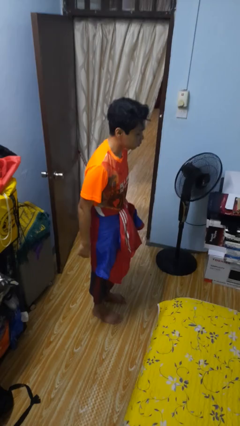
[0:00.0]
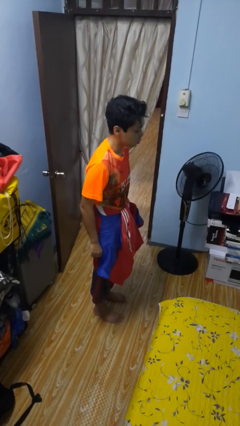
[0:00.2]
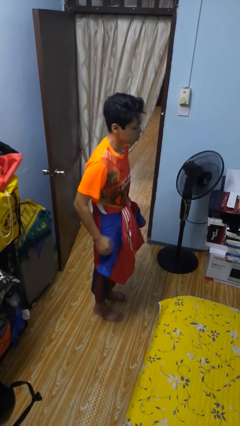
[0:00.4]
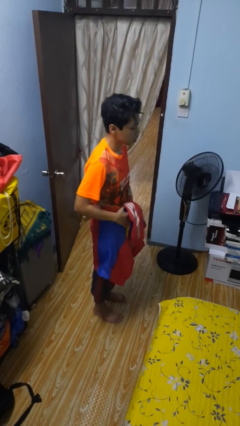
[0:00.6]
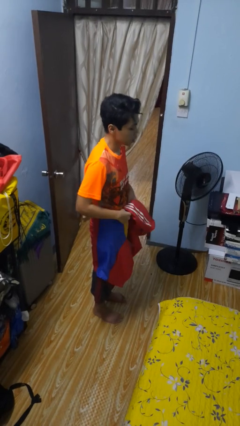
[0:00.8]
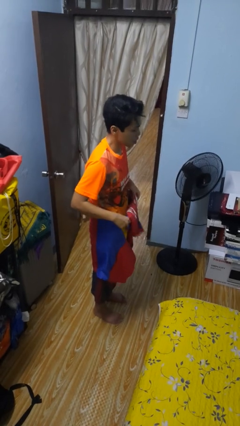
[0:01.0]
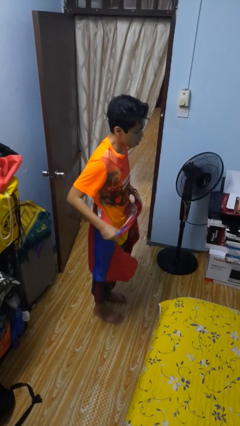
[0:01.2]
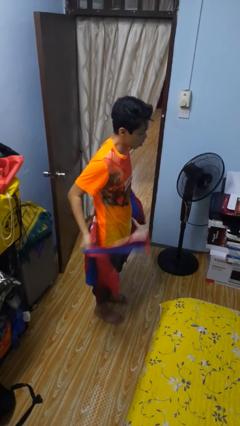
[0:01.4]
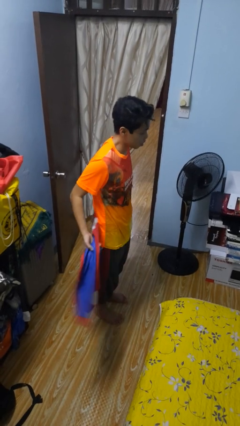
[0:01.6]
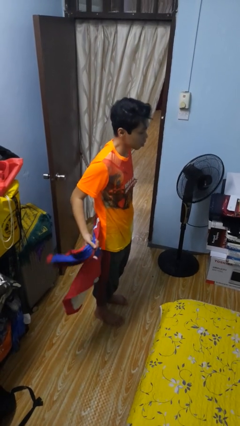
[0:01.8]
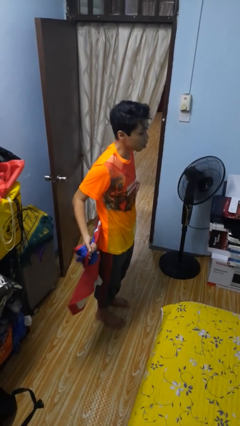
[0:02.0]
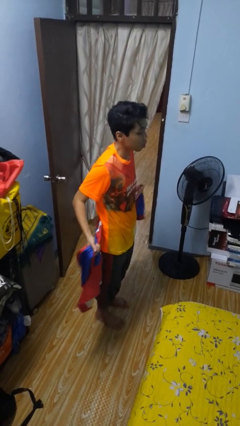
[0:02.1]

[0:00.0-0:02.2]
person unties jacket around waist

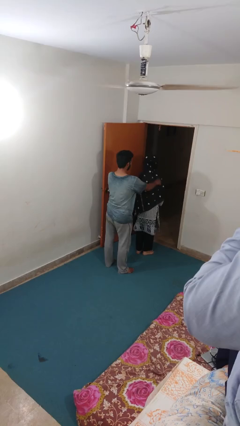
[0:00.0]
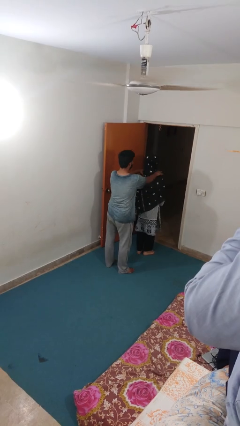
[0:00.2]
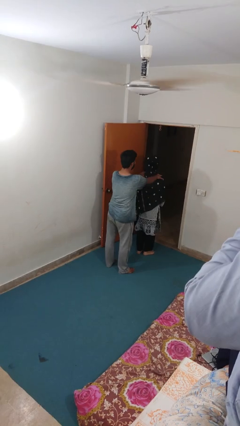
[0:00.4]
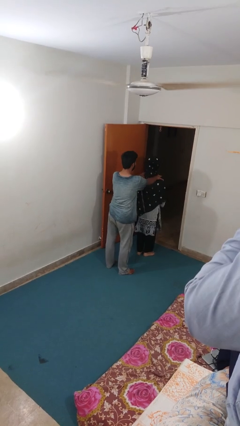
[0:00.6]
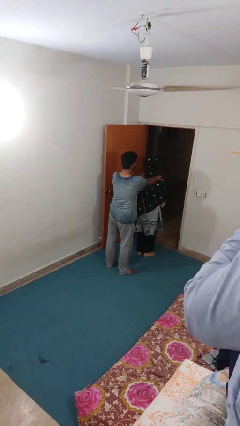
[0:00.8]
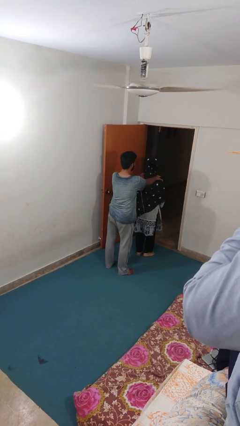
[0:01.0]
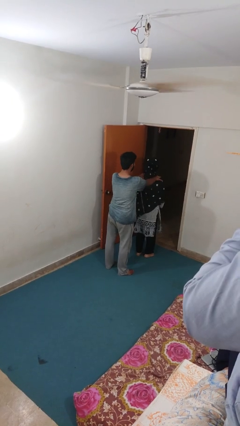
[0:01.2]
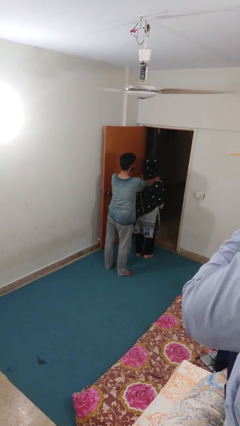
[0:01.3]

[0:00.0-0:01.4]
person grabs person by shoulder

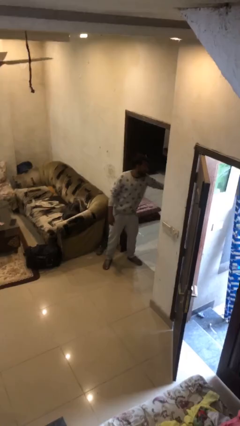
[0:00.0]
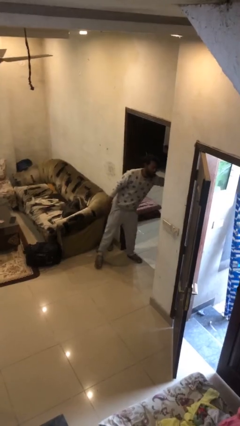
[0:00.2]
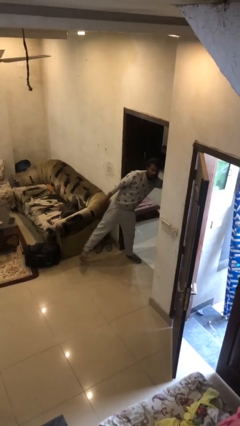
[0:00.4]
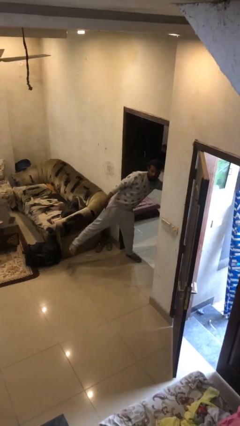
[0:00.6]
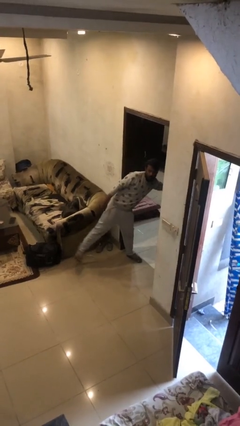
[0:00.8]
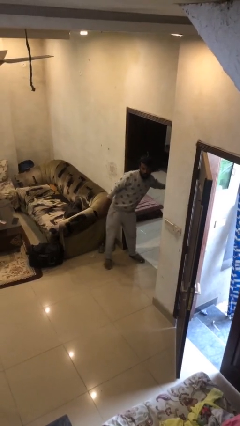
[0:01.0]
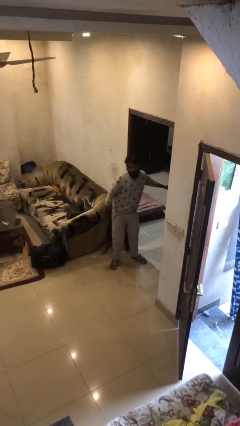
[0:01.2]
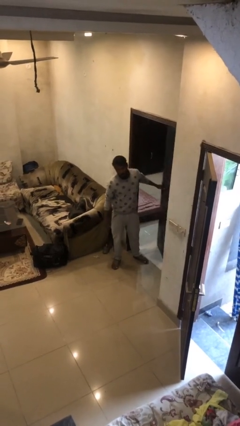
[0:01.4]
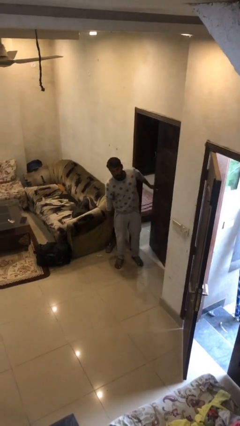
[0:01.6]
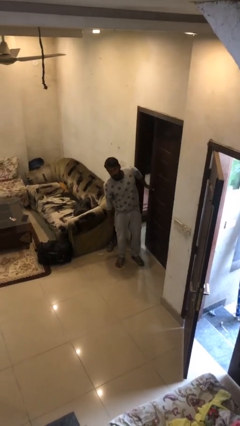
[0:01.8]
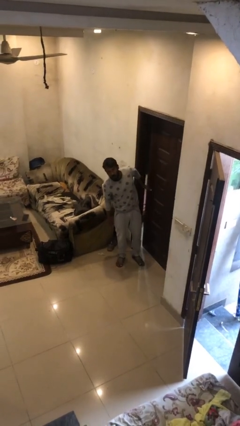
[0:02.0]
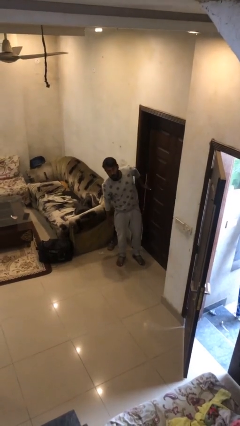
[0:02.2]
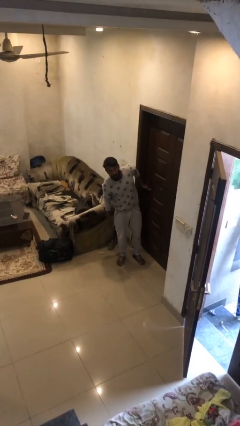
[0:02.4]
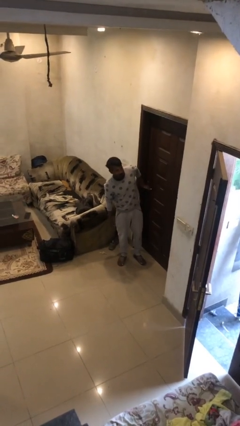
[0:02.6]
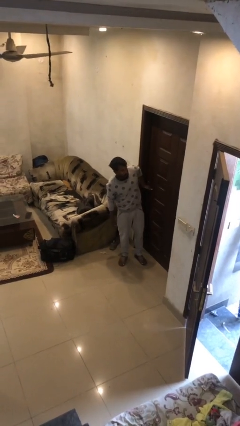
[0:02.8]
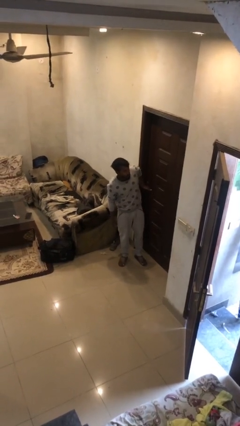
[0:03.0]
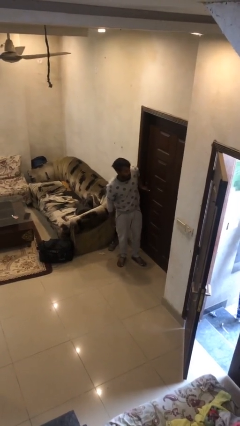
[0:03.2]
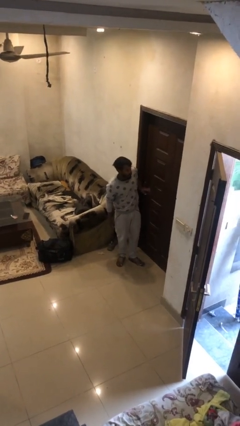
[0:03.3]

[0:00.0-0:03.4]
person closes facility door

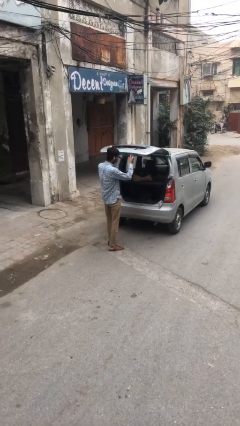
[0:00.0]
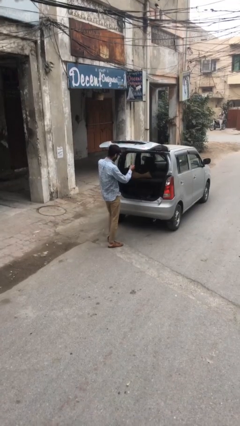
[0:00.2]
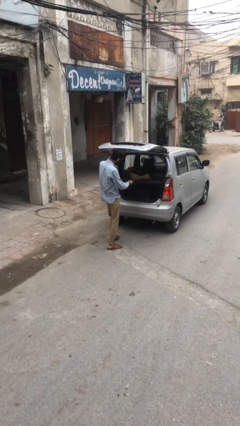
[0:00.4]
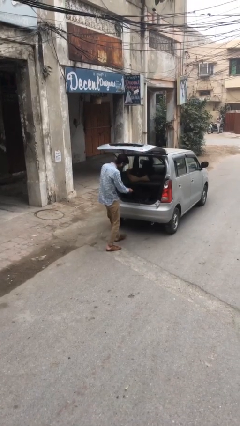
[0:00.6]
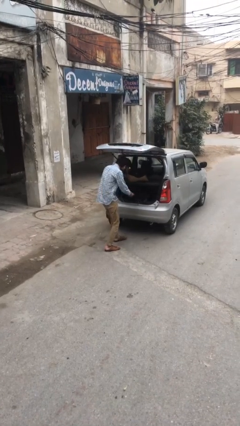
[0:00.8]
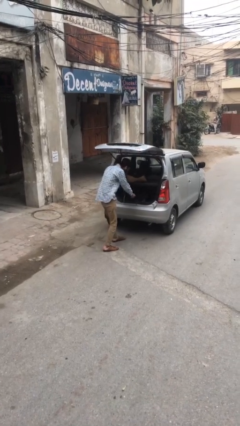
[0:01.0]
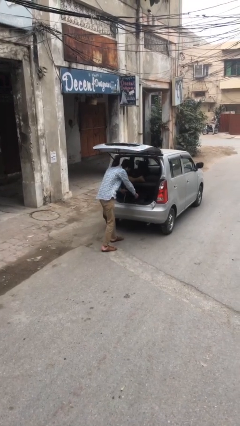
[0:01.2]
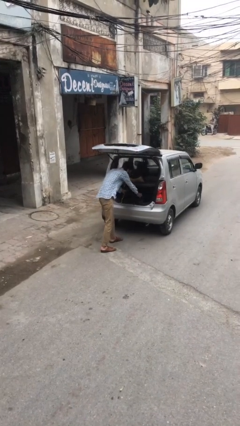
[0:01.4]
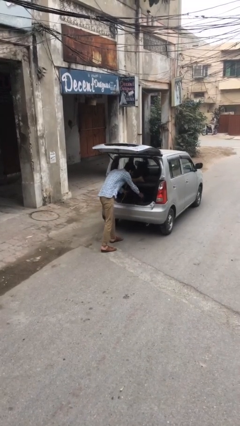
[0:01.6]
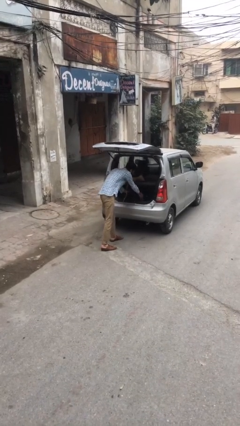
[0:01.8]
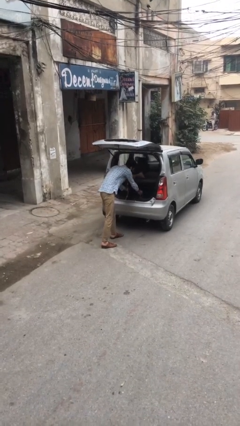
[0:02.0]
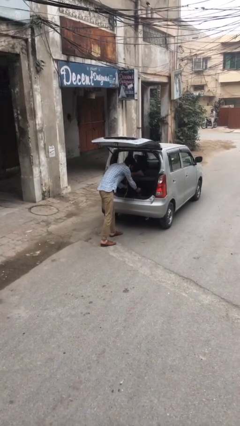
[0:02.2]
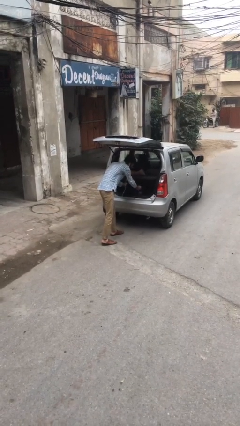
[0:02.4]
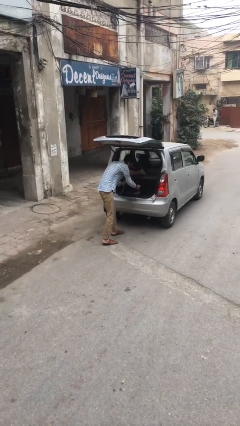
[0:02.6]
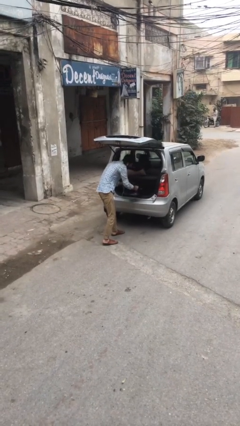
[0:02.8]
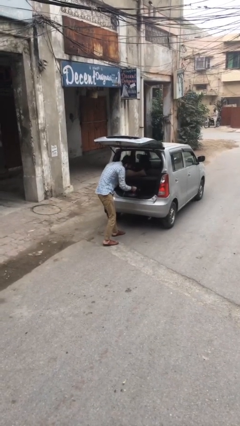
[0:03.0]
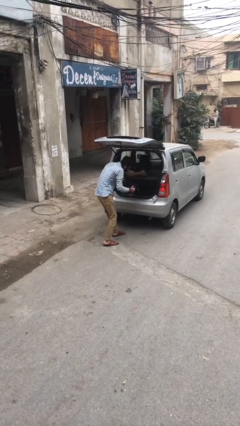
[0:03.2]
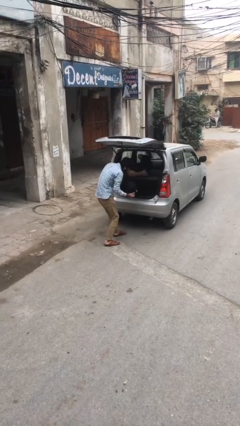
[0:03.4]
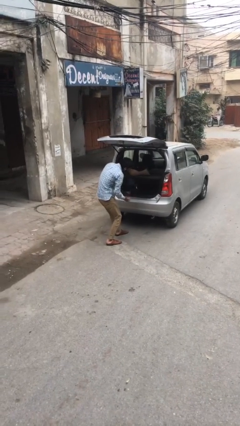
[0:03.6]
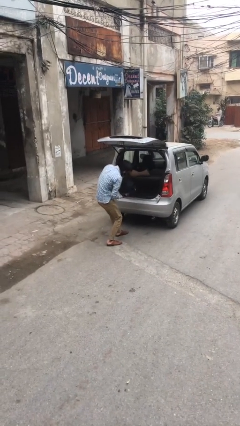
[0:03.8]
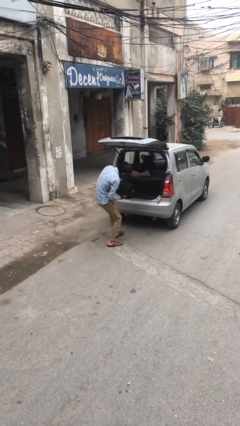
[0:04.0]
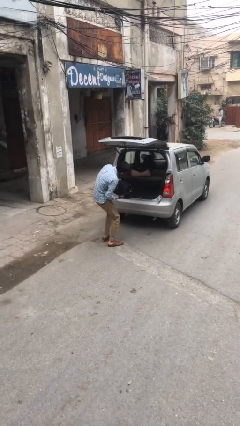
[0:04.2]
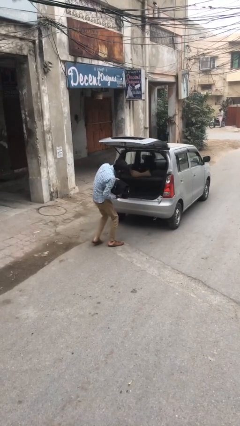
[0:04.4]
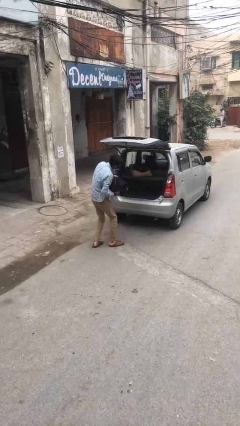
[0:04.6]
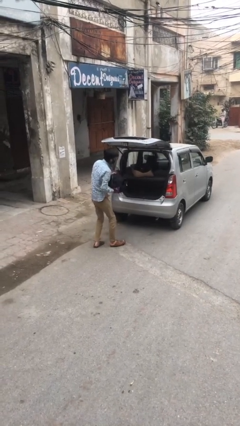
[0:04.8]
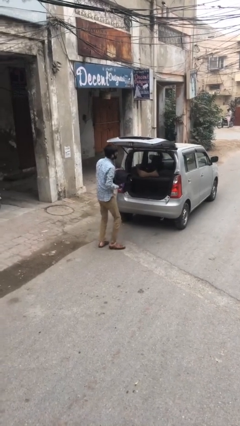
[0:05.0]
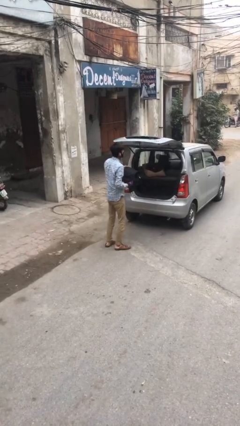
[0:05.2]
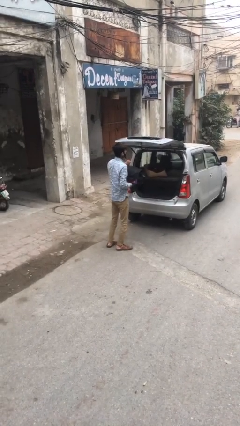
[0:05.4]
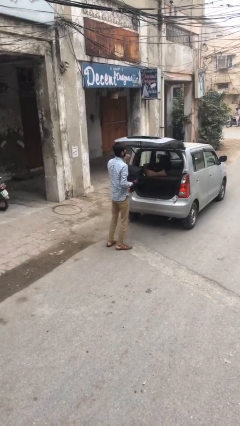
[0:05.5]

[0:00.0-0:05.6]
person unloads car

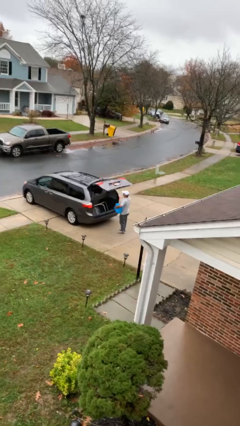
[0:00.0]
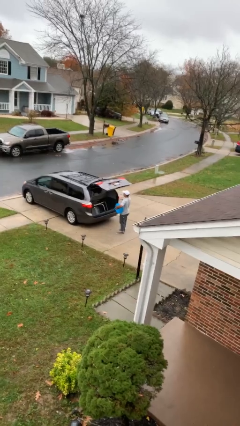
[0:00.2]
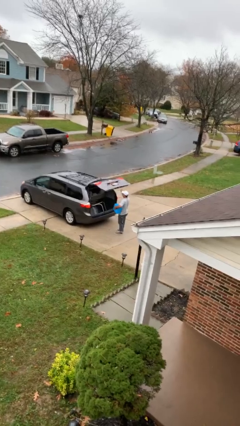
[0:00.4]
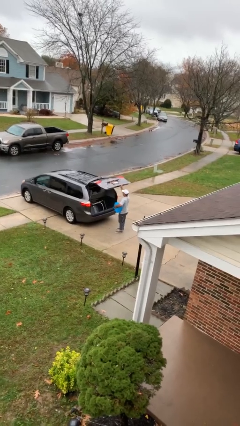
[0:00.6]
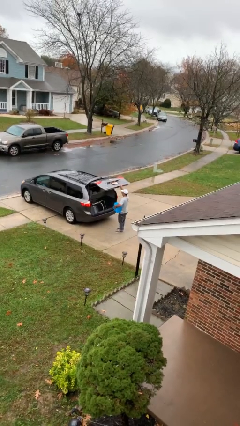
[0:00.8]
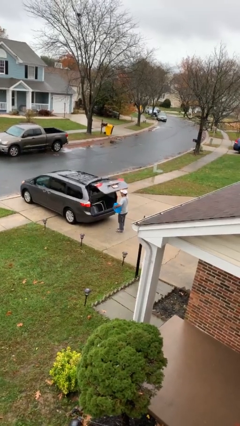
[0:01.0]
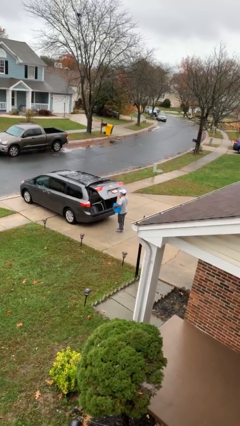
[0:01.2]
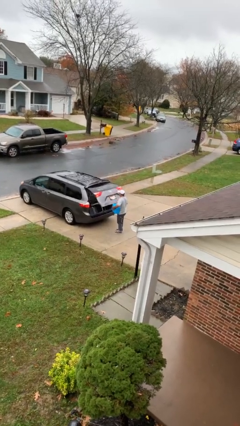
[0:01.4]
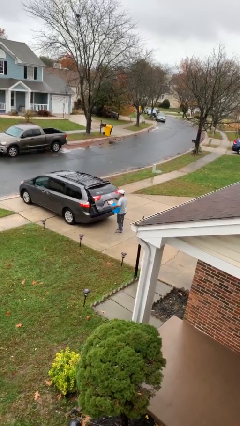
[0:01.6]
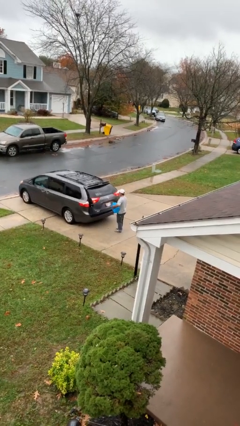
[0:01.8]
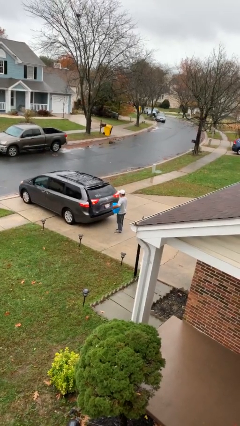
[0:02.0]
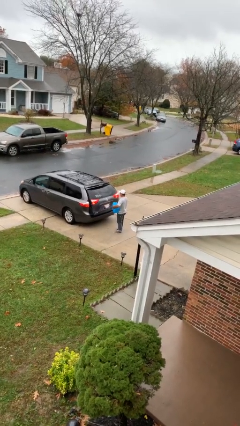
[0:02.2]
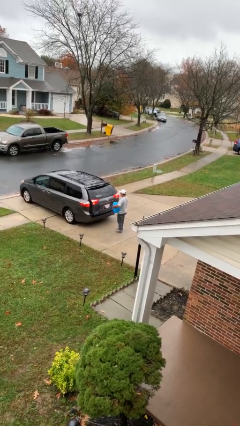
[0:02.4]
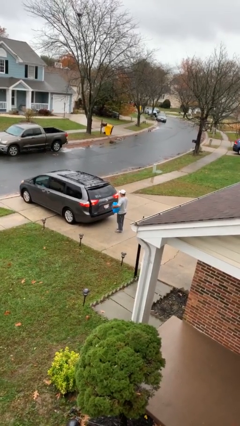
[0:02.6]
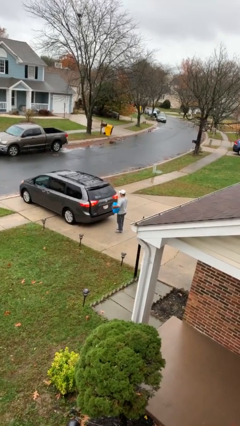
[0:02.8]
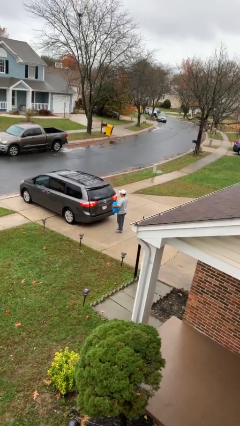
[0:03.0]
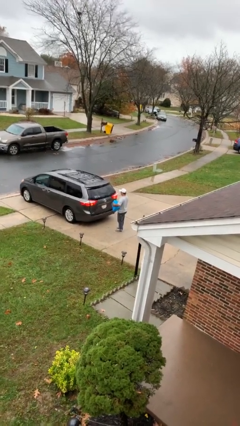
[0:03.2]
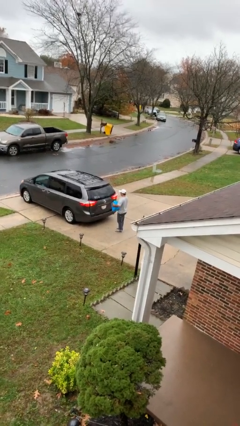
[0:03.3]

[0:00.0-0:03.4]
person closes car trunk

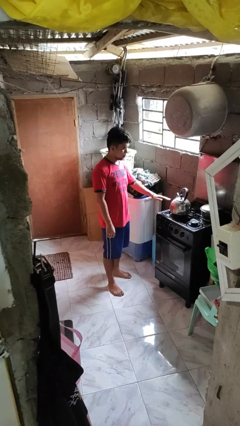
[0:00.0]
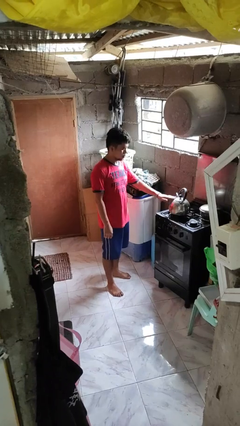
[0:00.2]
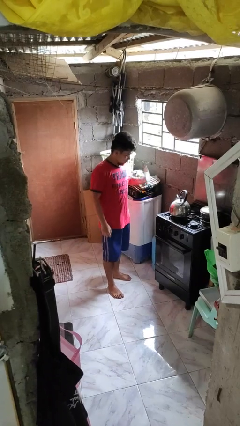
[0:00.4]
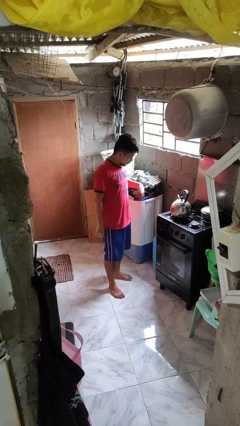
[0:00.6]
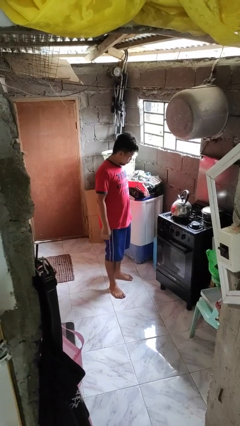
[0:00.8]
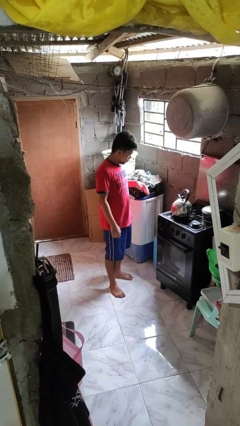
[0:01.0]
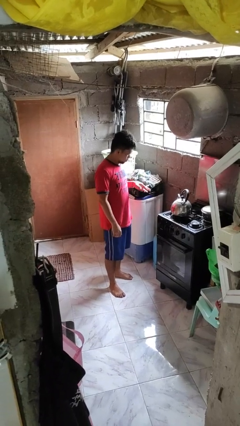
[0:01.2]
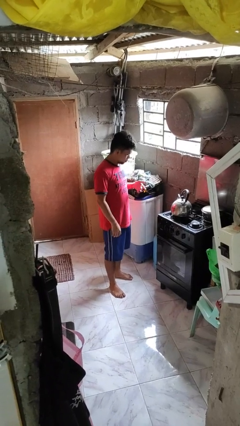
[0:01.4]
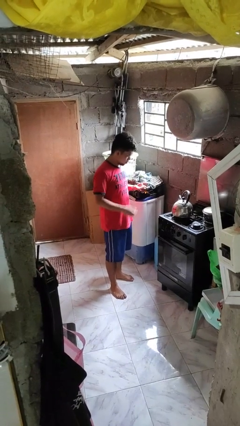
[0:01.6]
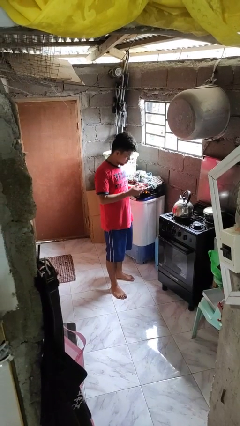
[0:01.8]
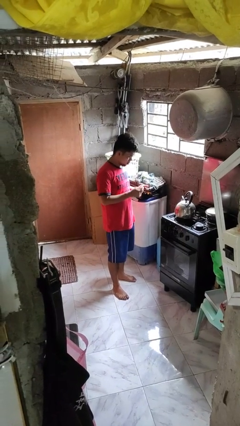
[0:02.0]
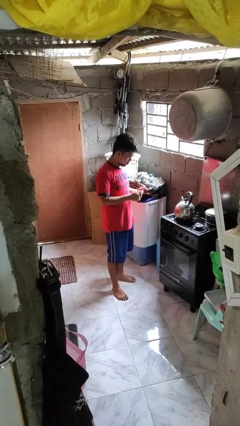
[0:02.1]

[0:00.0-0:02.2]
person burns hand
